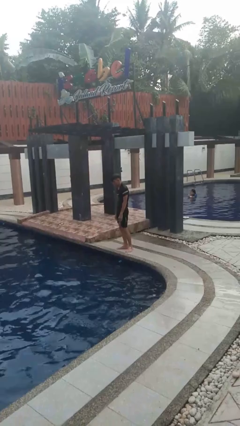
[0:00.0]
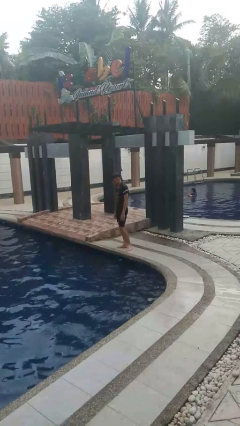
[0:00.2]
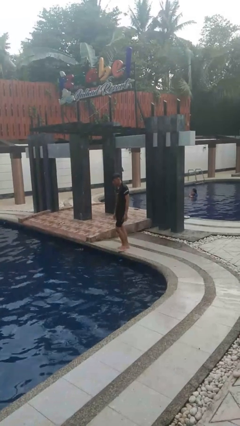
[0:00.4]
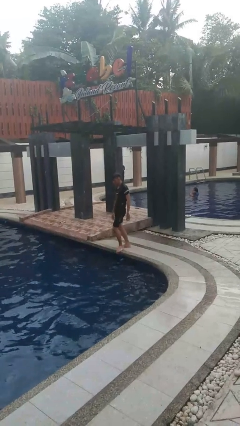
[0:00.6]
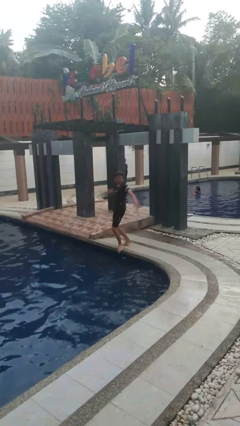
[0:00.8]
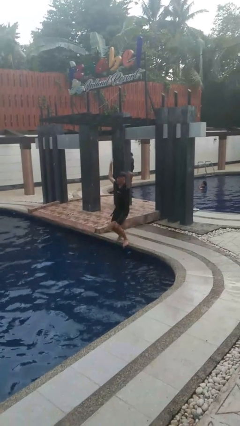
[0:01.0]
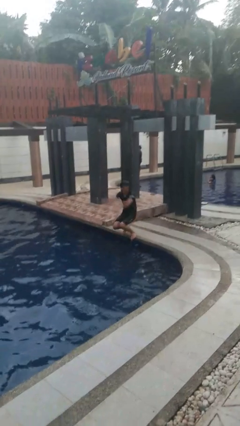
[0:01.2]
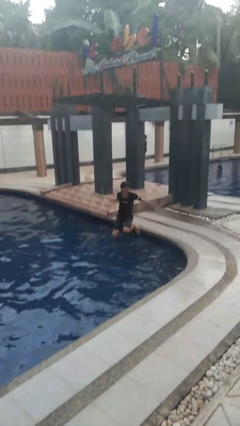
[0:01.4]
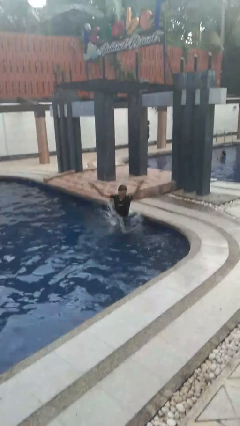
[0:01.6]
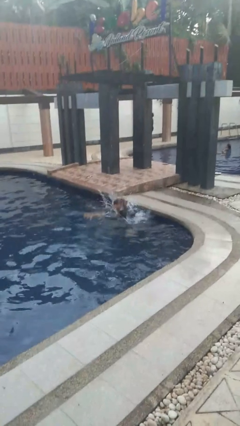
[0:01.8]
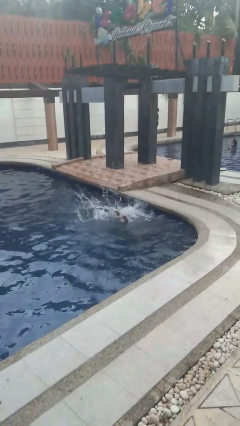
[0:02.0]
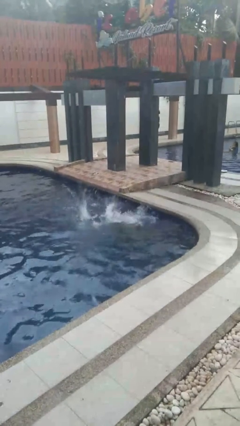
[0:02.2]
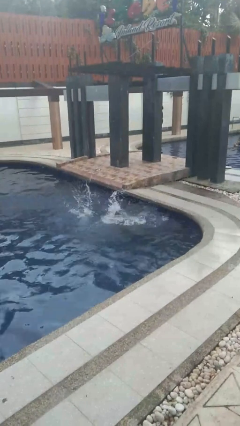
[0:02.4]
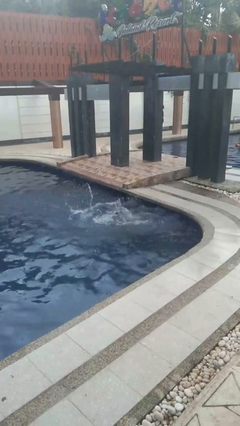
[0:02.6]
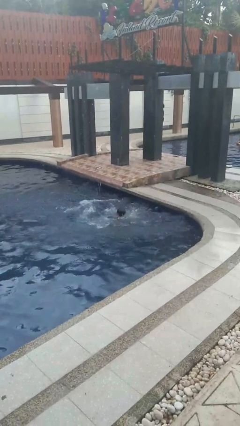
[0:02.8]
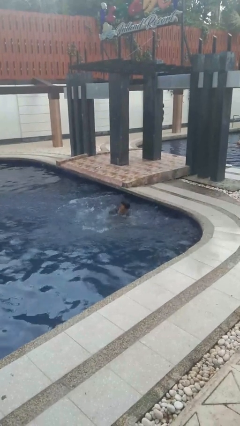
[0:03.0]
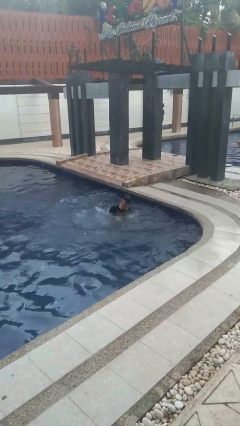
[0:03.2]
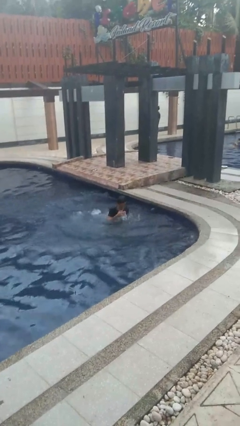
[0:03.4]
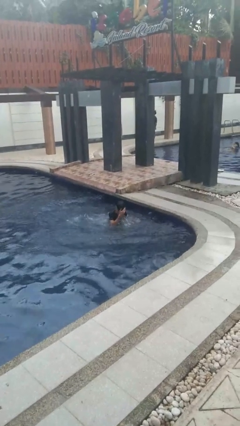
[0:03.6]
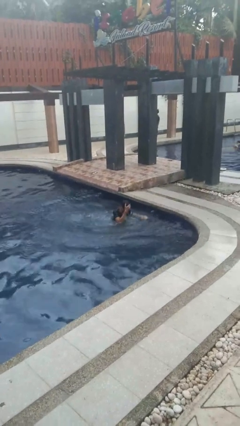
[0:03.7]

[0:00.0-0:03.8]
person falls into pool

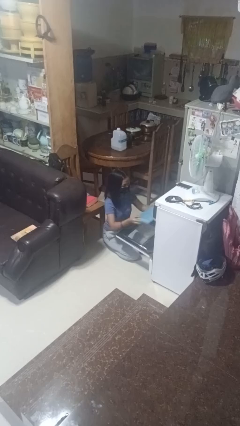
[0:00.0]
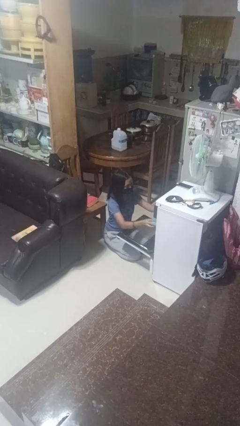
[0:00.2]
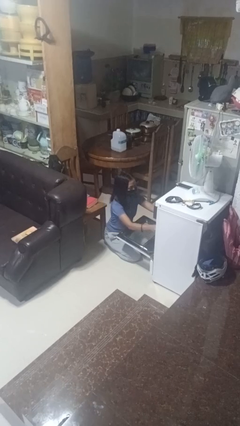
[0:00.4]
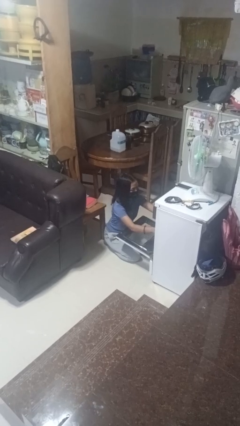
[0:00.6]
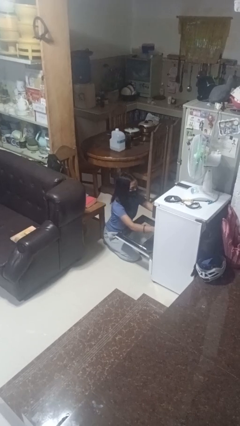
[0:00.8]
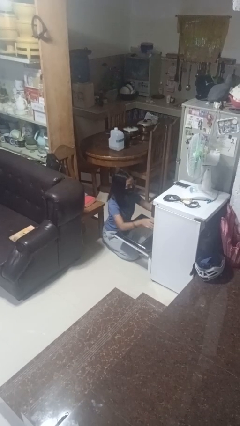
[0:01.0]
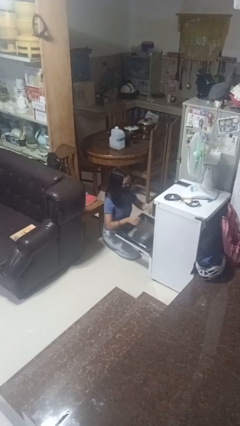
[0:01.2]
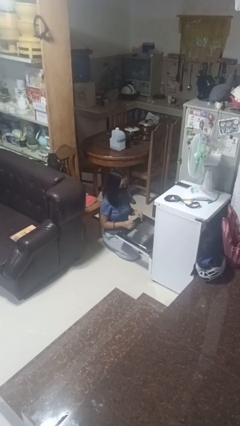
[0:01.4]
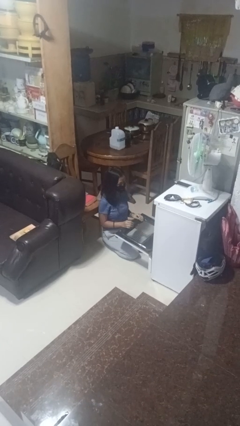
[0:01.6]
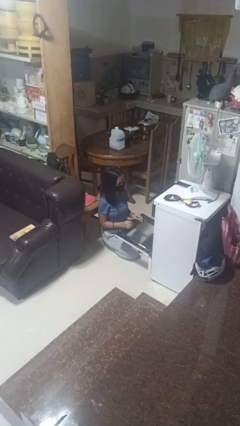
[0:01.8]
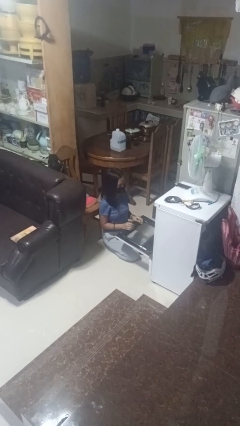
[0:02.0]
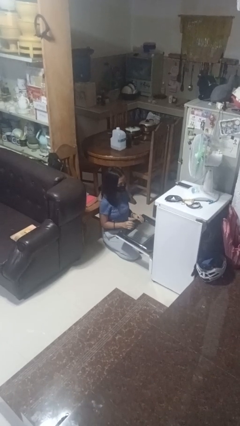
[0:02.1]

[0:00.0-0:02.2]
person puts object into oven

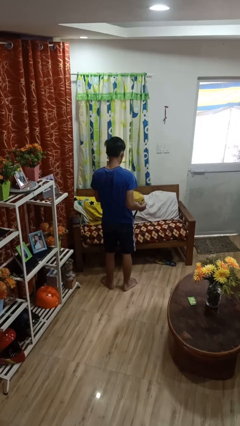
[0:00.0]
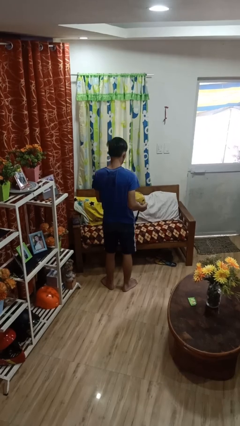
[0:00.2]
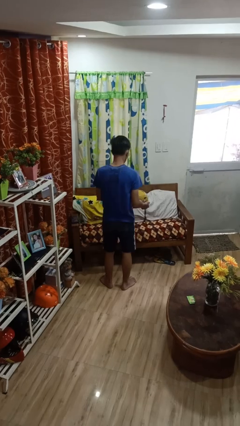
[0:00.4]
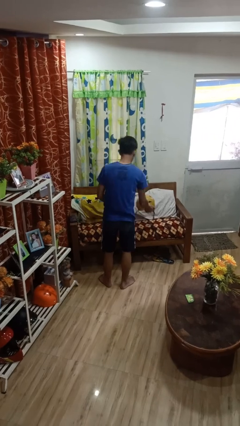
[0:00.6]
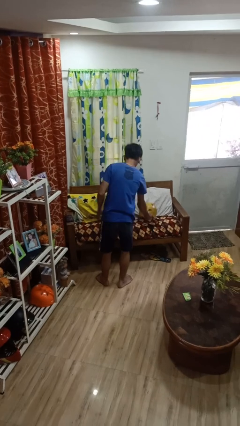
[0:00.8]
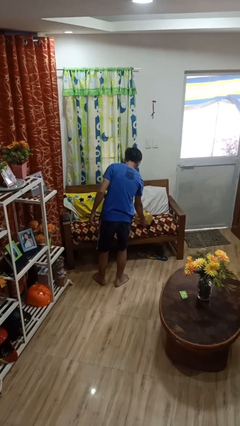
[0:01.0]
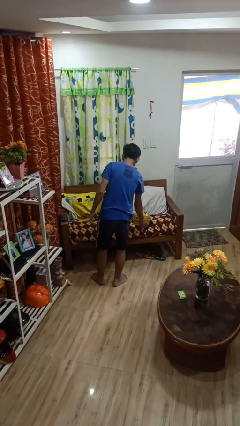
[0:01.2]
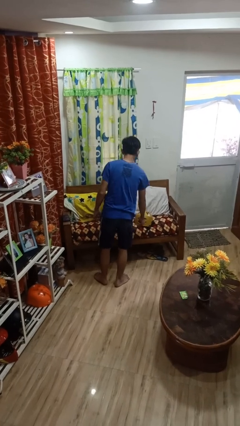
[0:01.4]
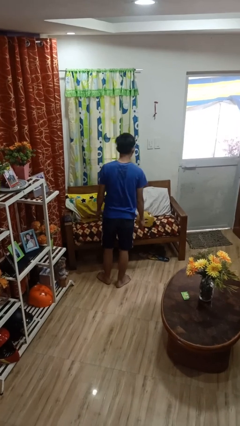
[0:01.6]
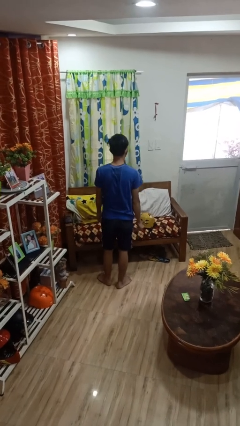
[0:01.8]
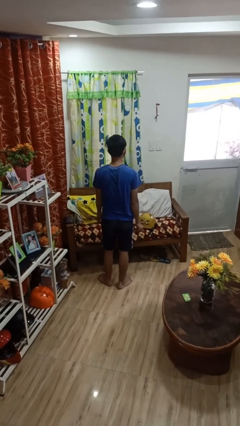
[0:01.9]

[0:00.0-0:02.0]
person puts down object on couch

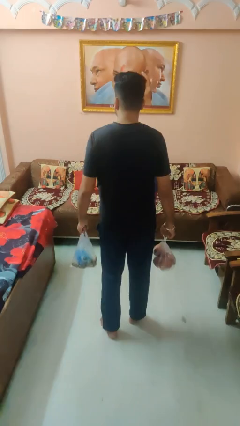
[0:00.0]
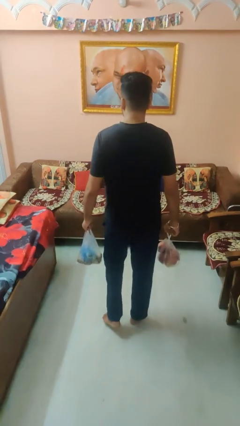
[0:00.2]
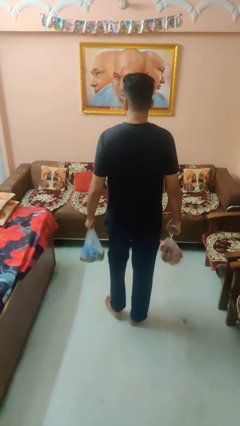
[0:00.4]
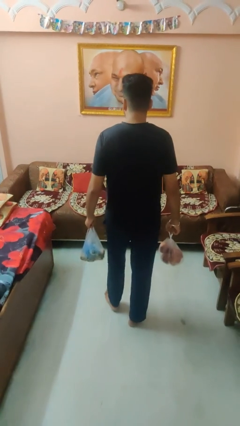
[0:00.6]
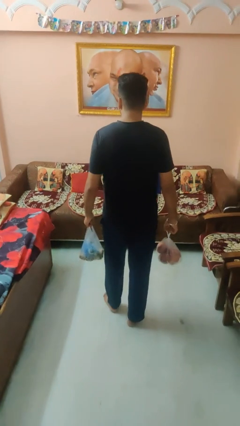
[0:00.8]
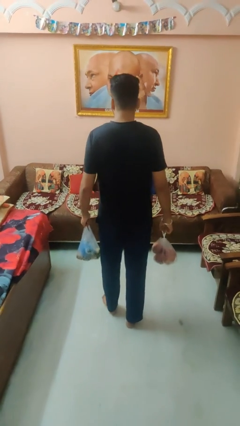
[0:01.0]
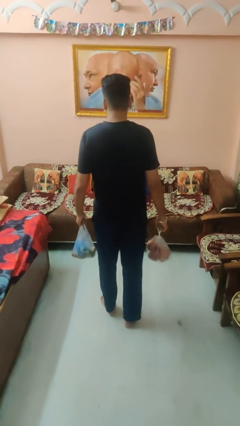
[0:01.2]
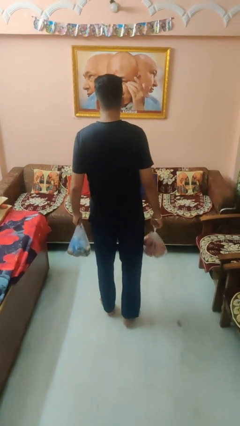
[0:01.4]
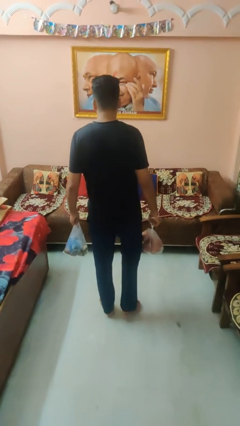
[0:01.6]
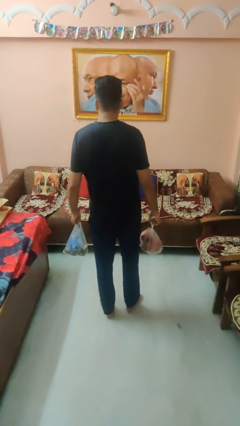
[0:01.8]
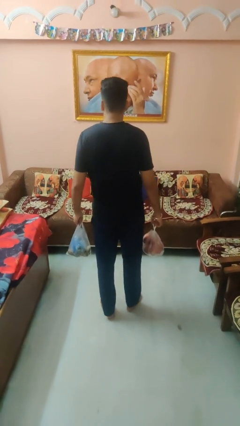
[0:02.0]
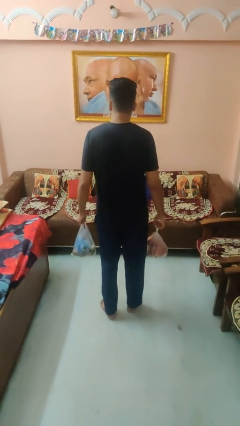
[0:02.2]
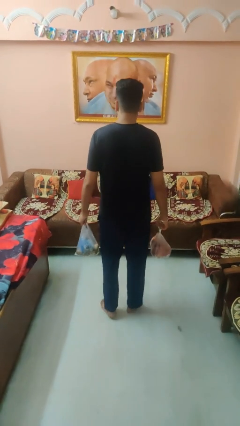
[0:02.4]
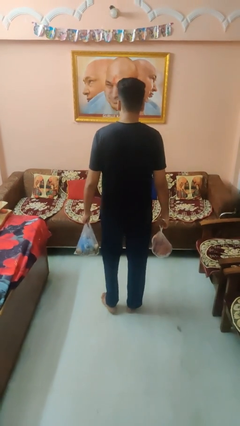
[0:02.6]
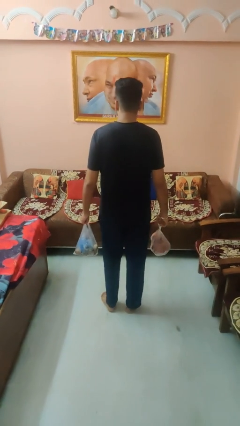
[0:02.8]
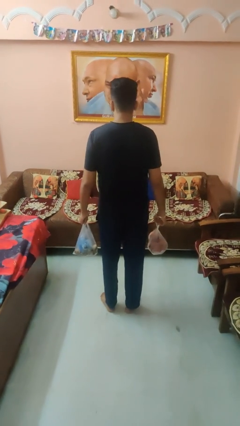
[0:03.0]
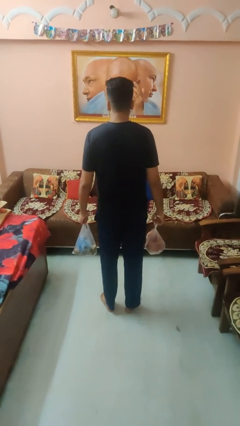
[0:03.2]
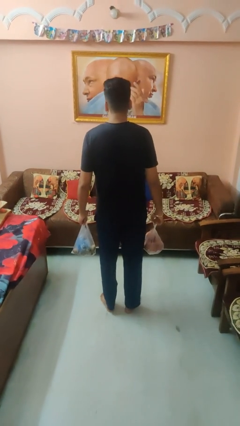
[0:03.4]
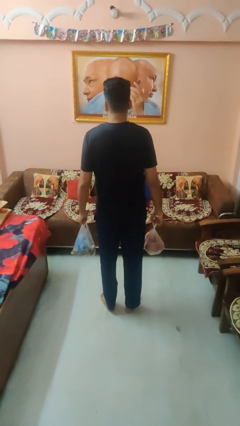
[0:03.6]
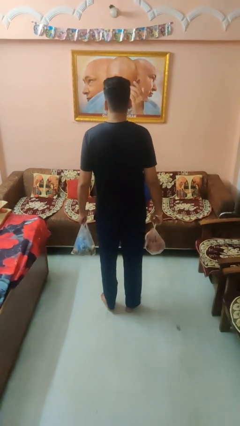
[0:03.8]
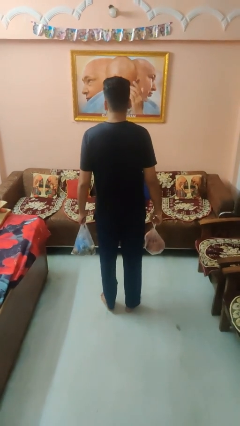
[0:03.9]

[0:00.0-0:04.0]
person carries groceries

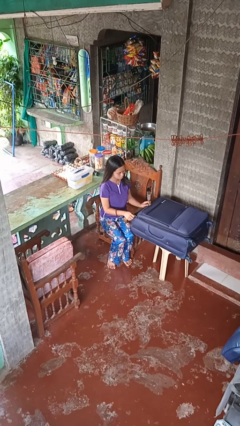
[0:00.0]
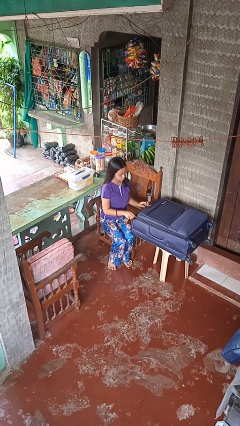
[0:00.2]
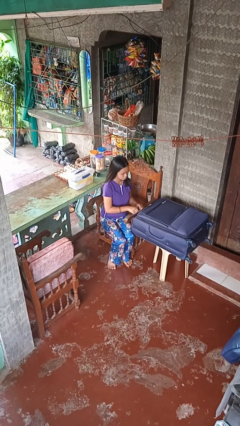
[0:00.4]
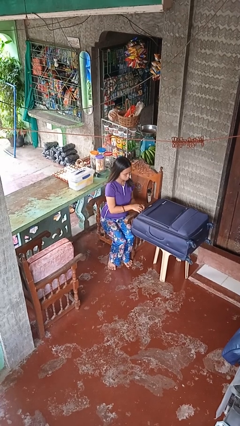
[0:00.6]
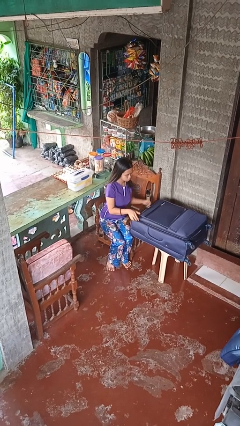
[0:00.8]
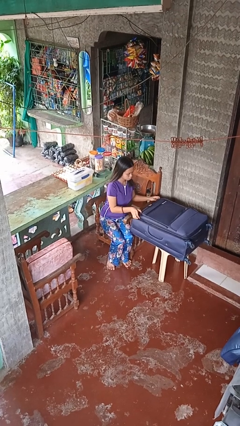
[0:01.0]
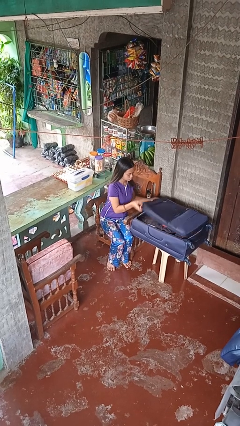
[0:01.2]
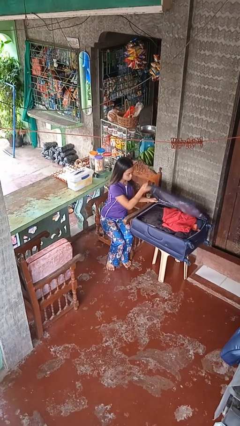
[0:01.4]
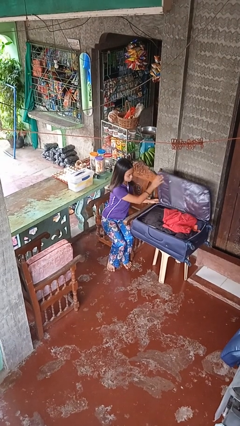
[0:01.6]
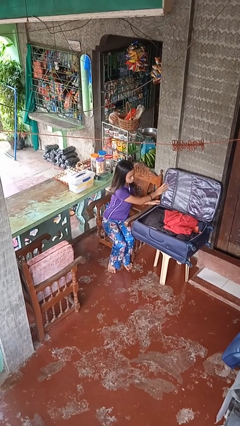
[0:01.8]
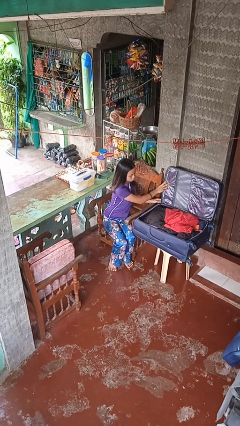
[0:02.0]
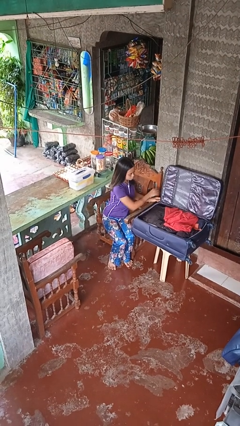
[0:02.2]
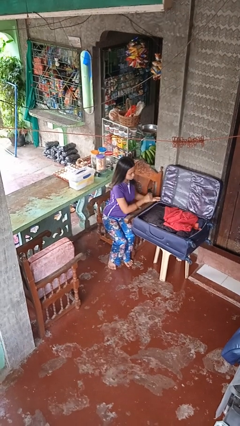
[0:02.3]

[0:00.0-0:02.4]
person opens suitcase

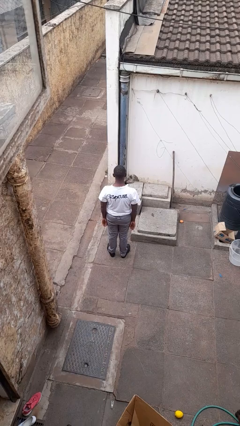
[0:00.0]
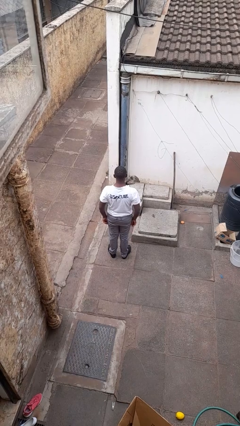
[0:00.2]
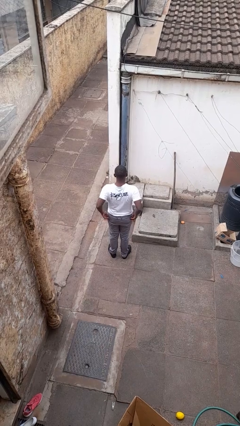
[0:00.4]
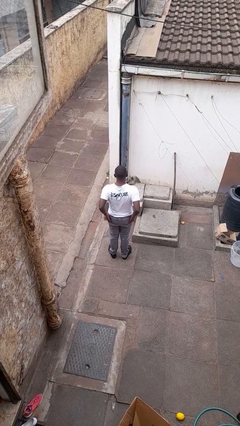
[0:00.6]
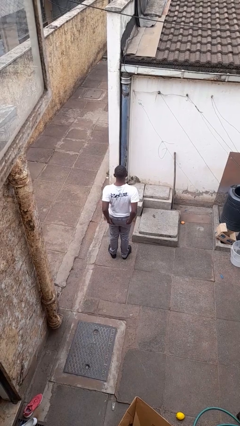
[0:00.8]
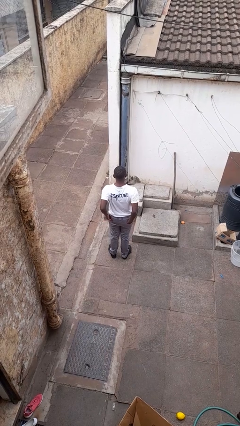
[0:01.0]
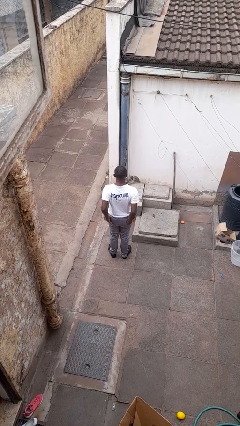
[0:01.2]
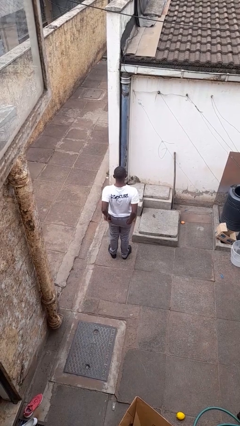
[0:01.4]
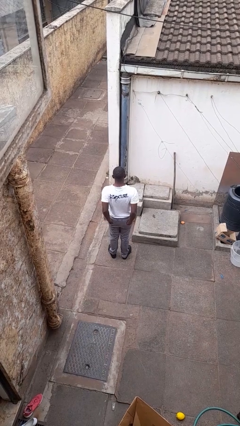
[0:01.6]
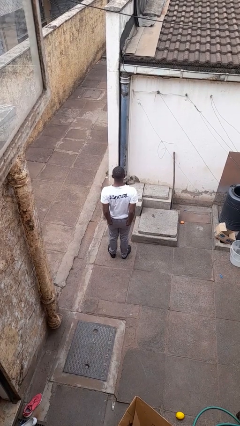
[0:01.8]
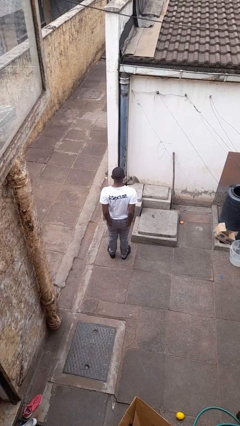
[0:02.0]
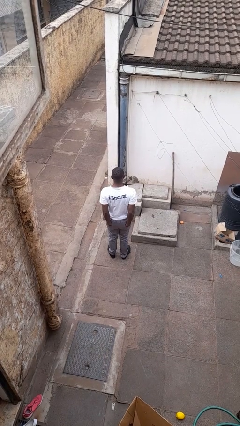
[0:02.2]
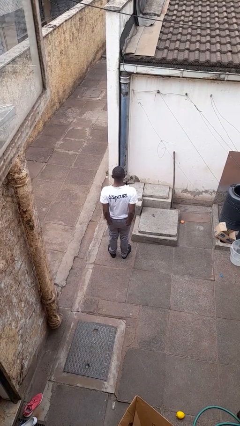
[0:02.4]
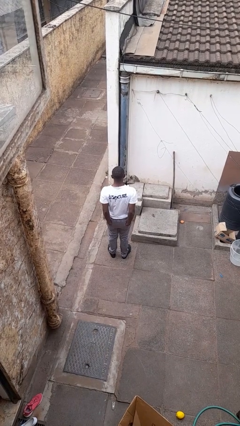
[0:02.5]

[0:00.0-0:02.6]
person puts hands in back pockets

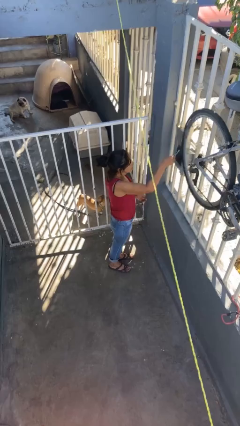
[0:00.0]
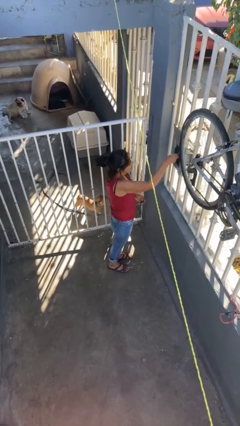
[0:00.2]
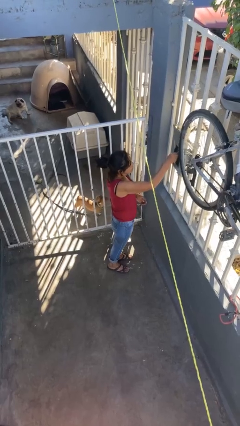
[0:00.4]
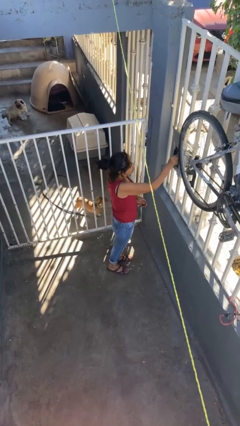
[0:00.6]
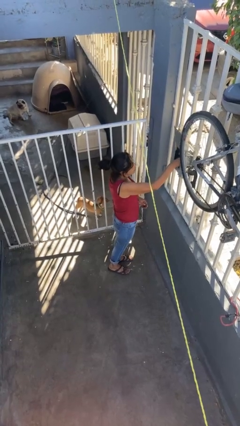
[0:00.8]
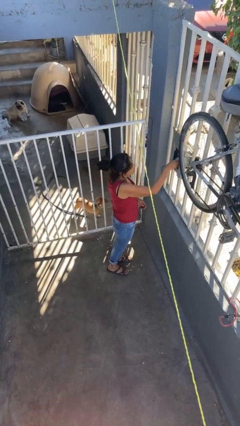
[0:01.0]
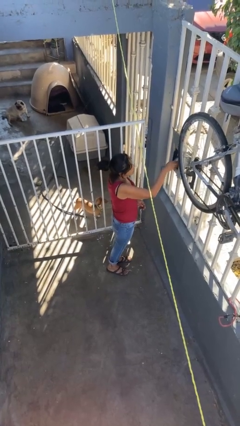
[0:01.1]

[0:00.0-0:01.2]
person puts letters in mailbox
